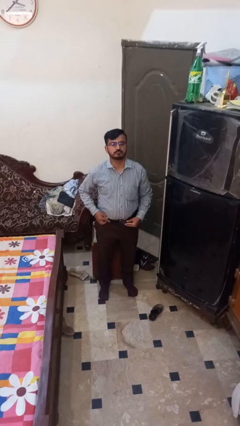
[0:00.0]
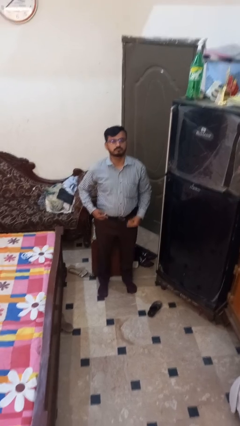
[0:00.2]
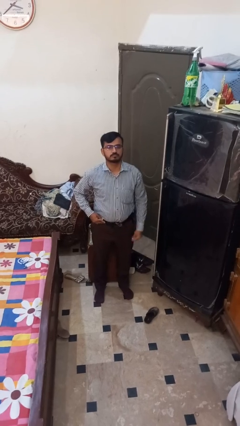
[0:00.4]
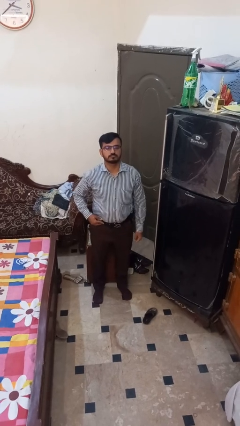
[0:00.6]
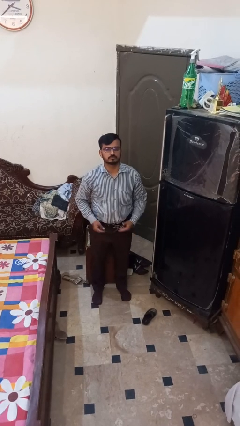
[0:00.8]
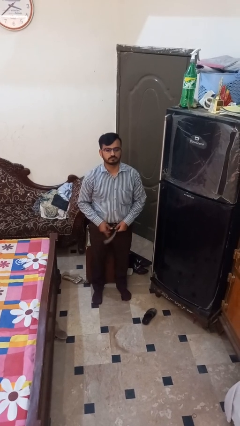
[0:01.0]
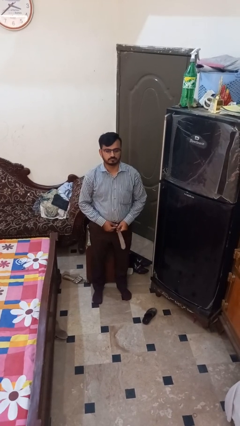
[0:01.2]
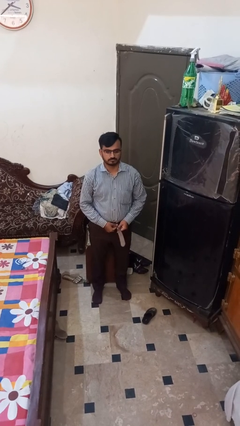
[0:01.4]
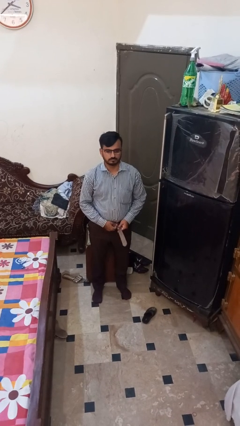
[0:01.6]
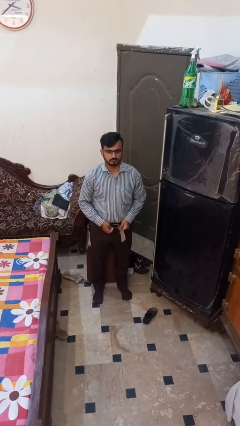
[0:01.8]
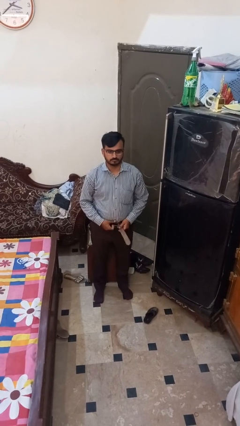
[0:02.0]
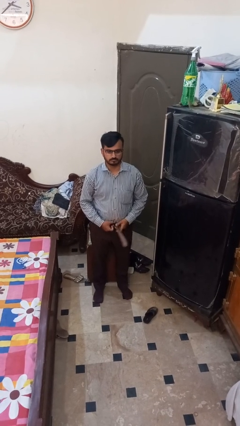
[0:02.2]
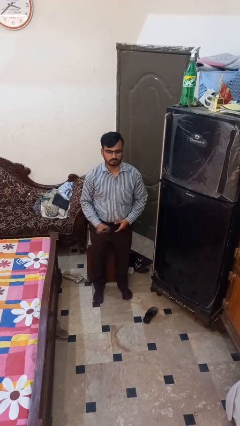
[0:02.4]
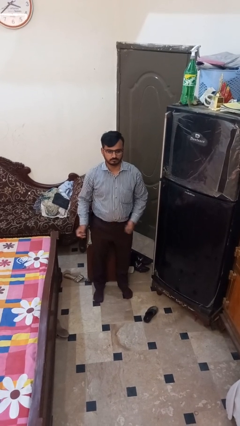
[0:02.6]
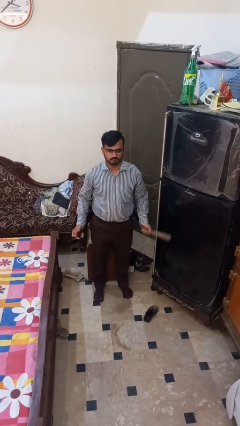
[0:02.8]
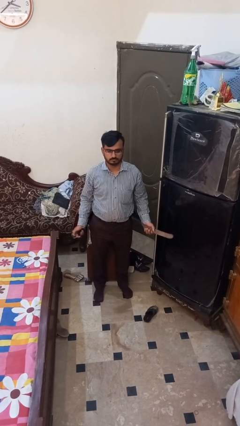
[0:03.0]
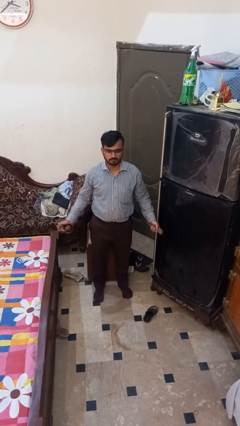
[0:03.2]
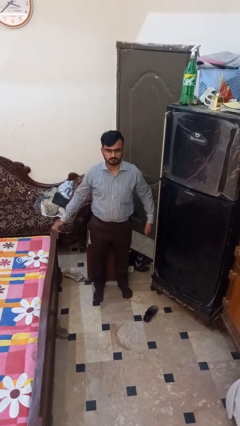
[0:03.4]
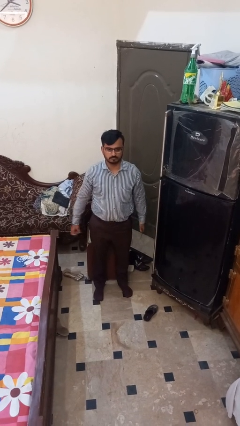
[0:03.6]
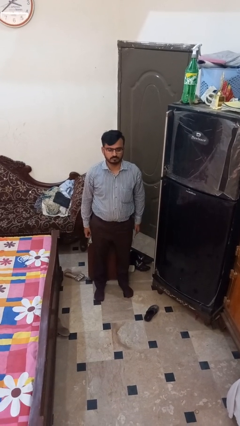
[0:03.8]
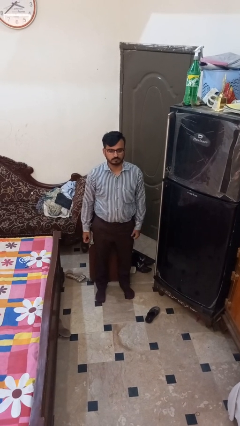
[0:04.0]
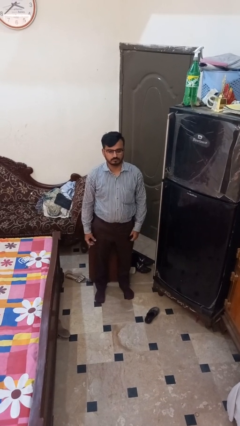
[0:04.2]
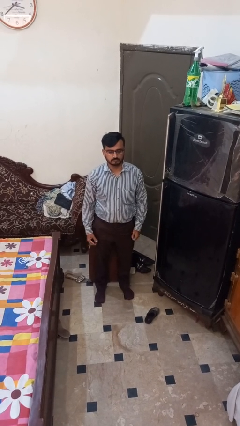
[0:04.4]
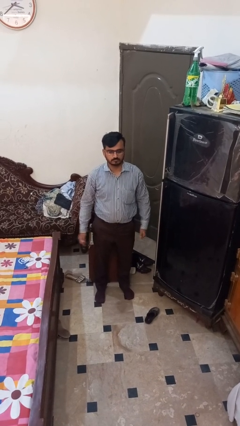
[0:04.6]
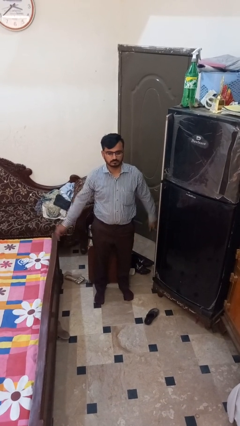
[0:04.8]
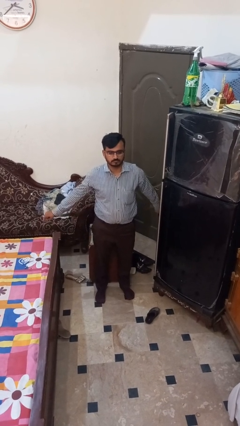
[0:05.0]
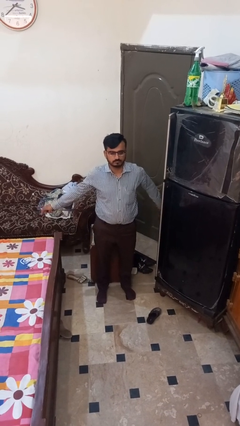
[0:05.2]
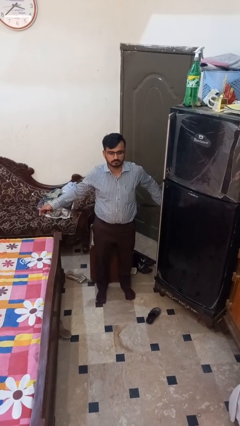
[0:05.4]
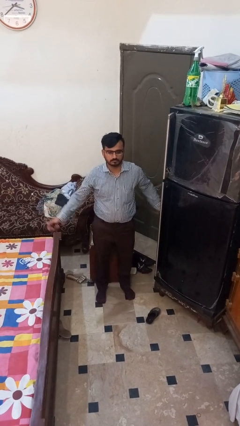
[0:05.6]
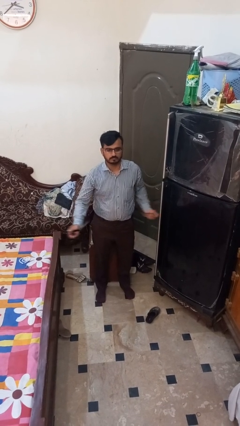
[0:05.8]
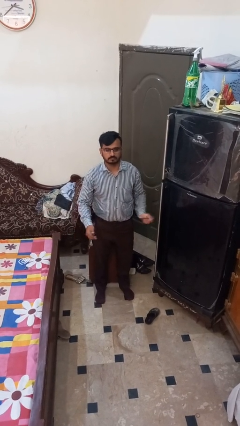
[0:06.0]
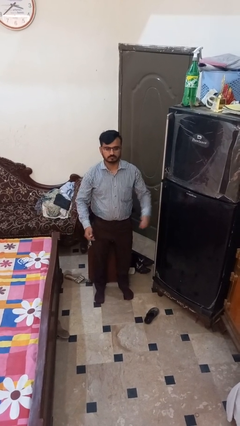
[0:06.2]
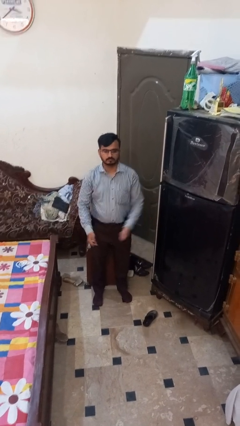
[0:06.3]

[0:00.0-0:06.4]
person takes off belt

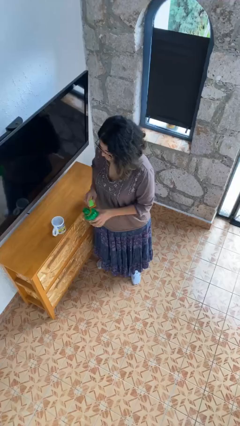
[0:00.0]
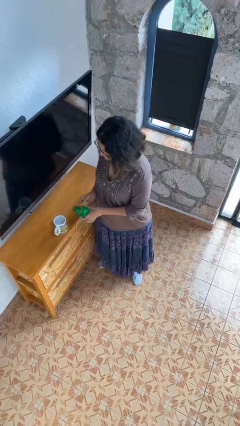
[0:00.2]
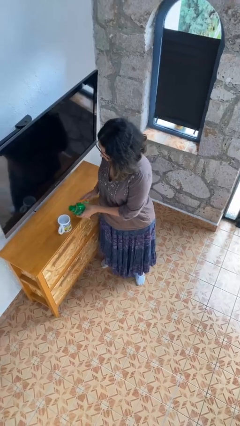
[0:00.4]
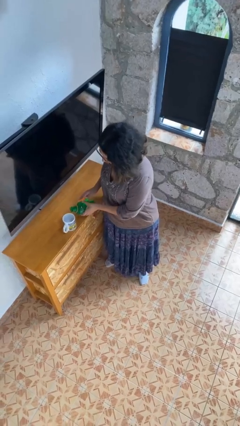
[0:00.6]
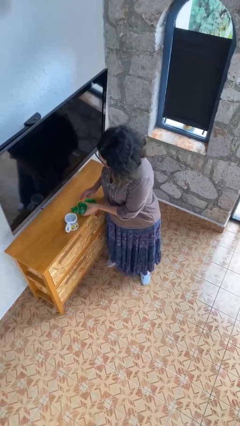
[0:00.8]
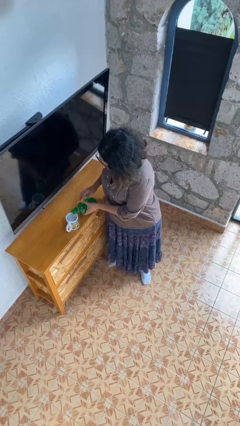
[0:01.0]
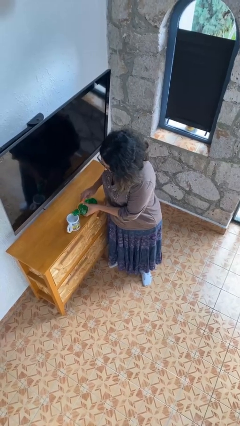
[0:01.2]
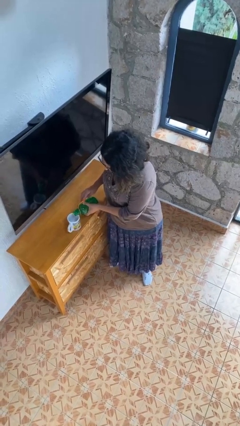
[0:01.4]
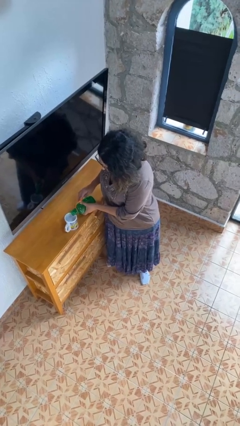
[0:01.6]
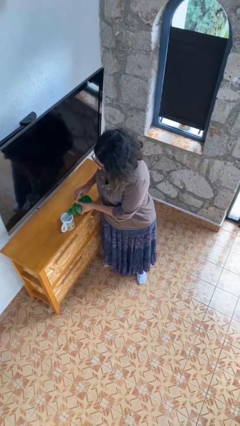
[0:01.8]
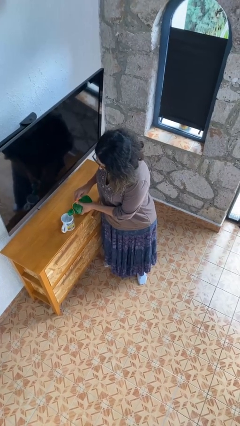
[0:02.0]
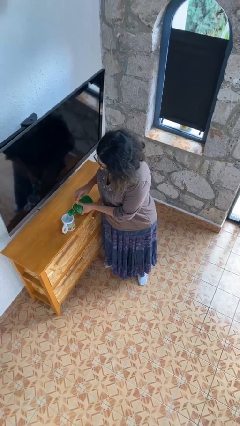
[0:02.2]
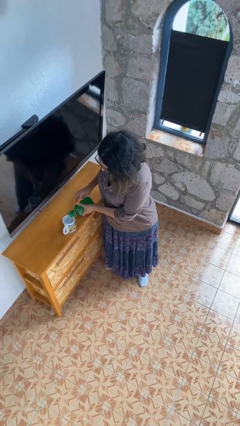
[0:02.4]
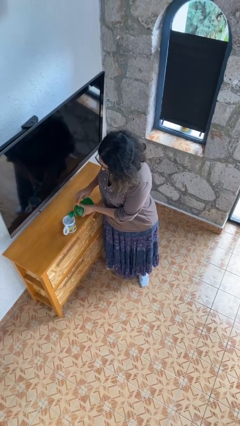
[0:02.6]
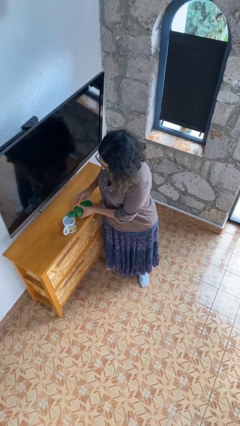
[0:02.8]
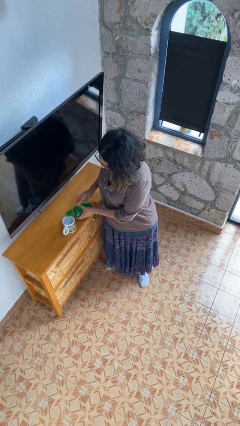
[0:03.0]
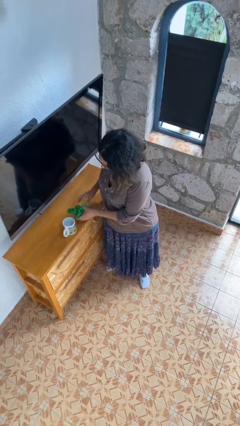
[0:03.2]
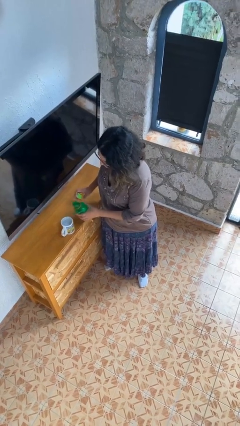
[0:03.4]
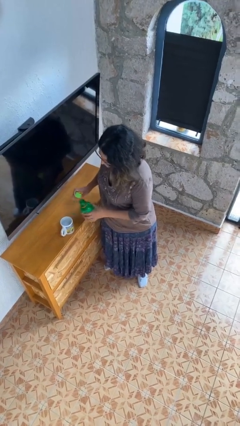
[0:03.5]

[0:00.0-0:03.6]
person pours liquid into cup

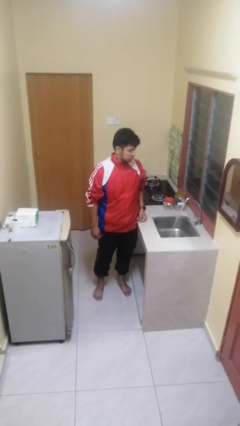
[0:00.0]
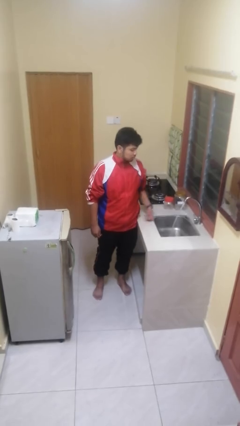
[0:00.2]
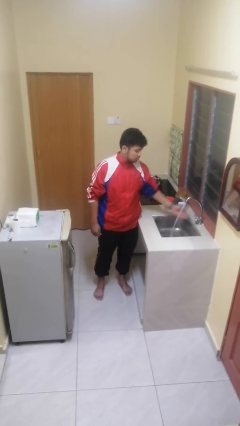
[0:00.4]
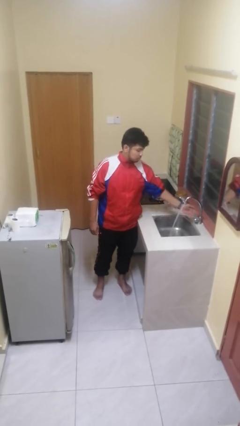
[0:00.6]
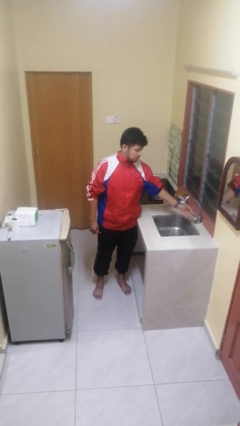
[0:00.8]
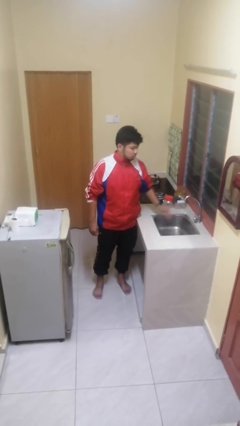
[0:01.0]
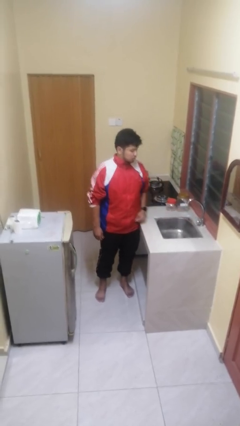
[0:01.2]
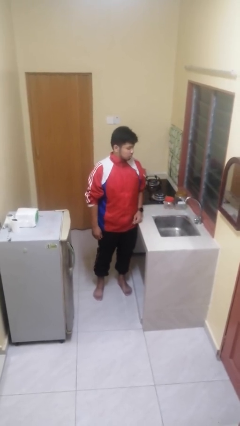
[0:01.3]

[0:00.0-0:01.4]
person turns off faucet

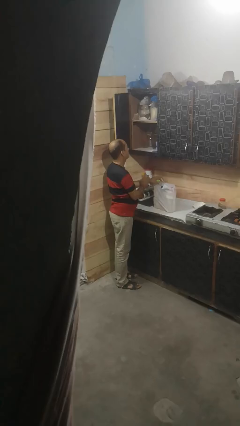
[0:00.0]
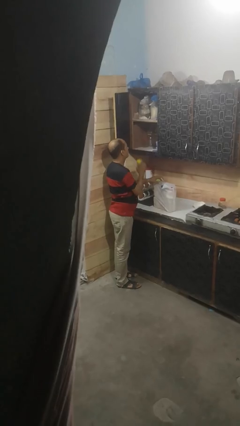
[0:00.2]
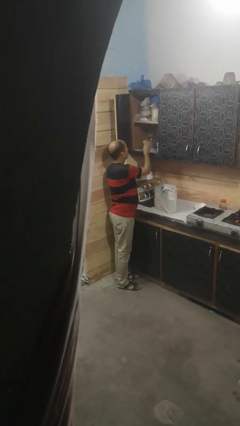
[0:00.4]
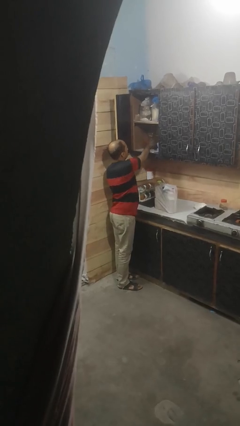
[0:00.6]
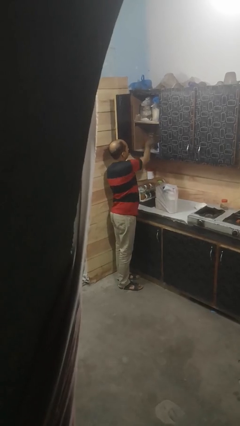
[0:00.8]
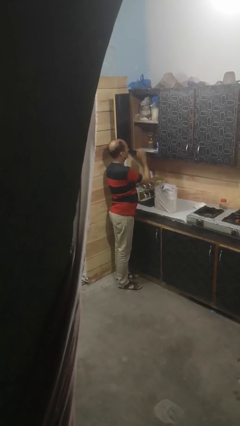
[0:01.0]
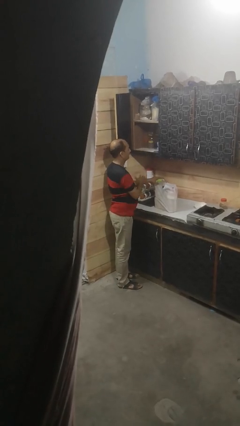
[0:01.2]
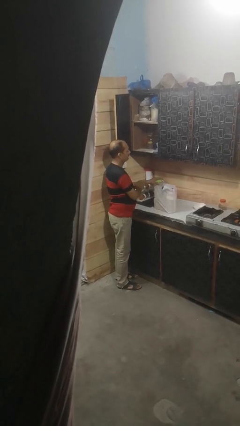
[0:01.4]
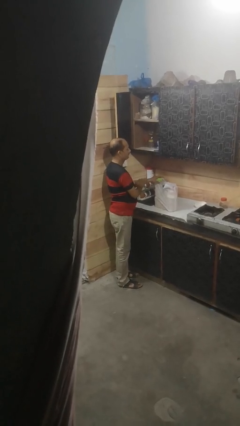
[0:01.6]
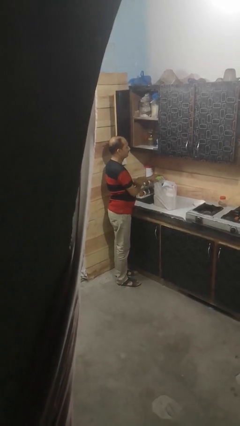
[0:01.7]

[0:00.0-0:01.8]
person loads groceries into cabinet

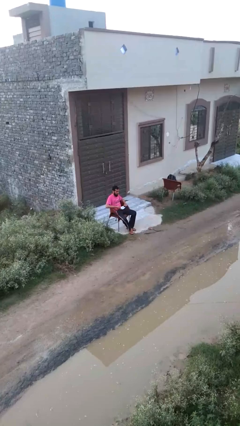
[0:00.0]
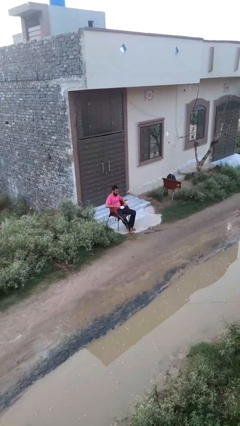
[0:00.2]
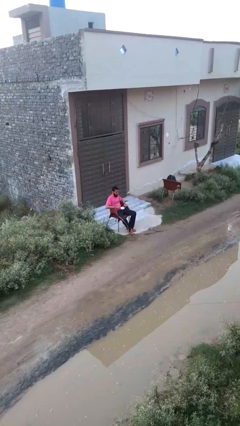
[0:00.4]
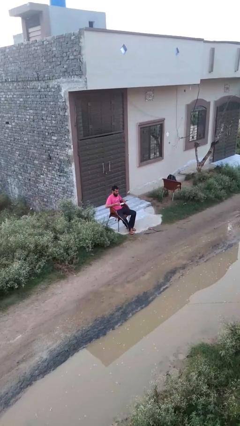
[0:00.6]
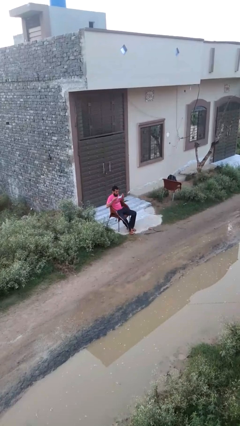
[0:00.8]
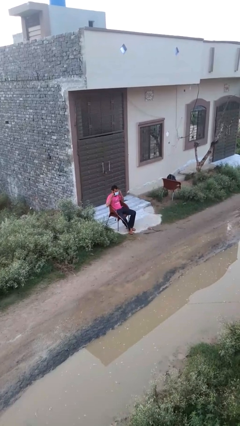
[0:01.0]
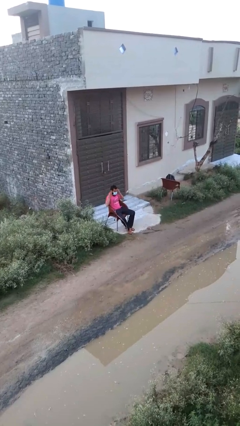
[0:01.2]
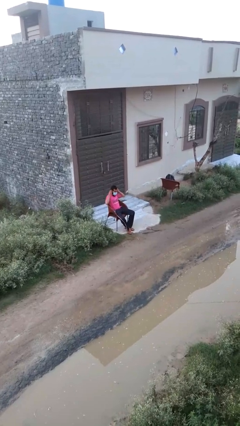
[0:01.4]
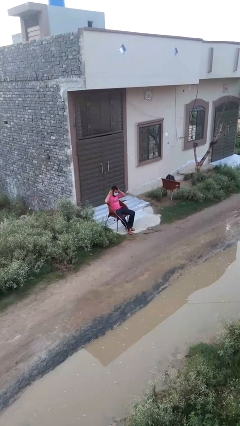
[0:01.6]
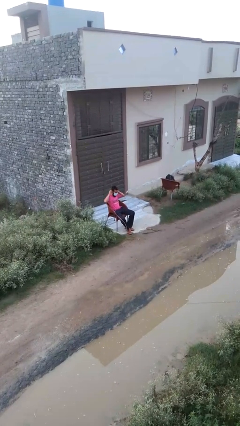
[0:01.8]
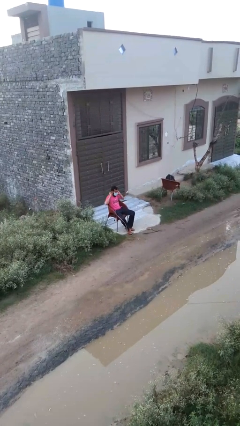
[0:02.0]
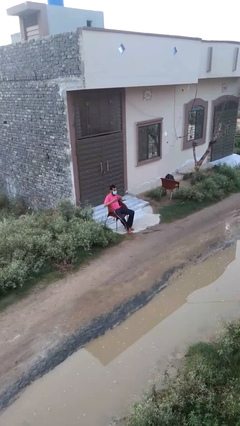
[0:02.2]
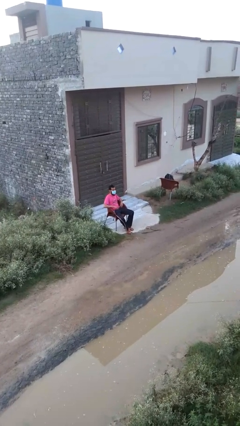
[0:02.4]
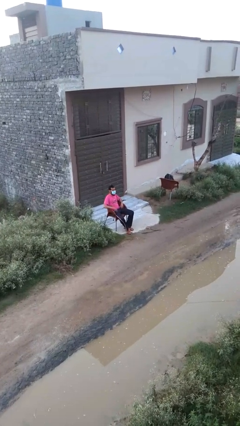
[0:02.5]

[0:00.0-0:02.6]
person puts on facemask

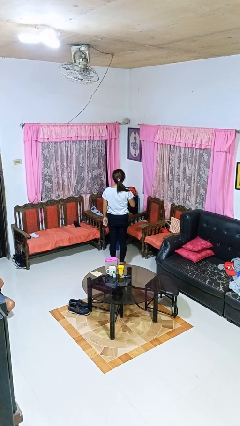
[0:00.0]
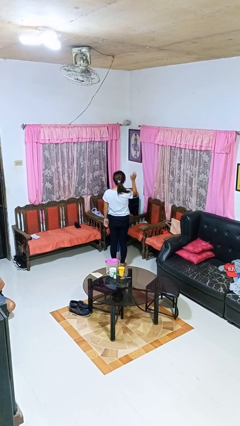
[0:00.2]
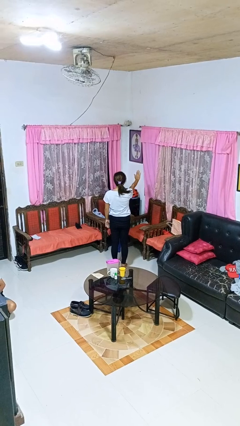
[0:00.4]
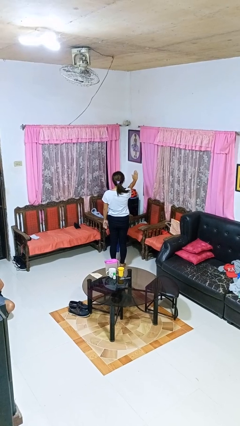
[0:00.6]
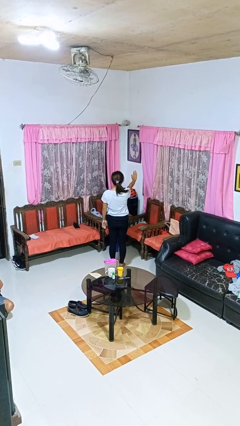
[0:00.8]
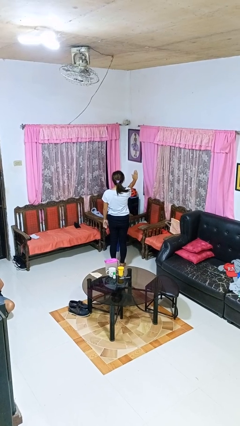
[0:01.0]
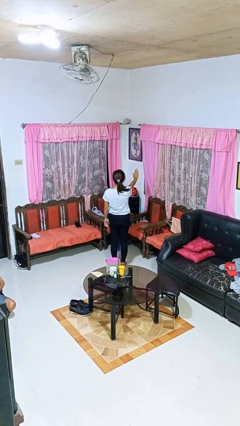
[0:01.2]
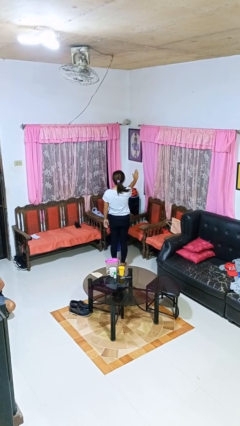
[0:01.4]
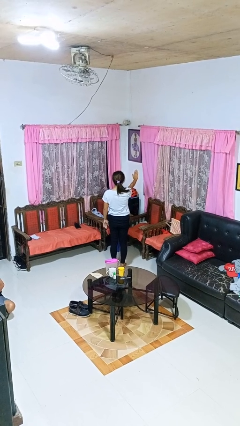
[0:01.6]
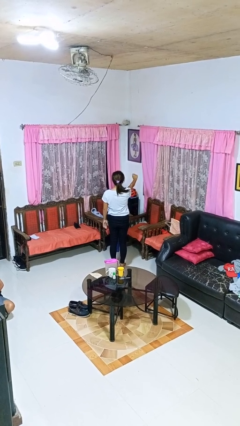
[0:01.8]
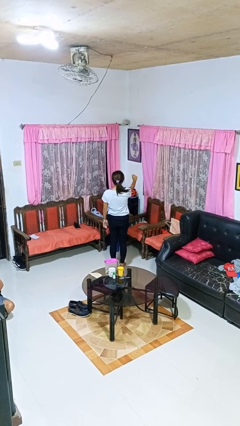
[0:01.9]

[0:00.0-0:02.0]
person gestures stop
